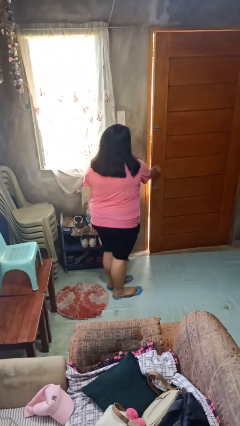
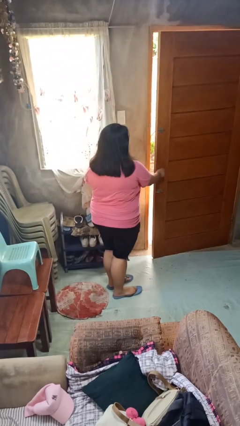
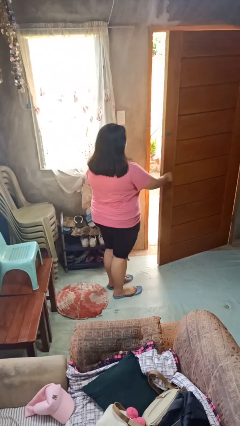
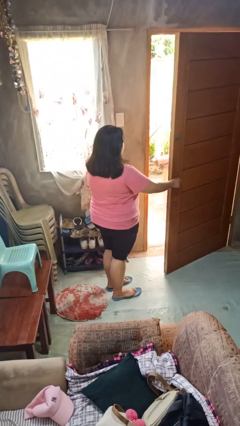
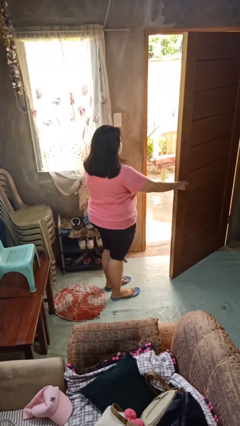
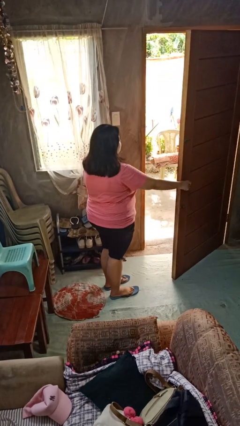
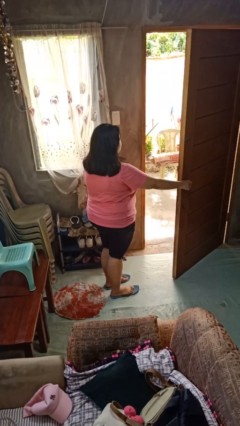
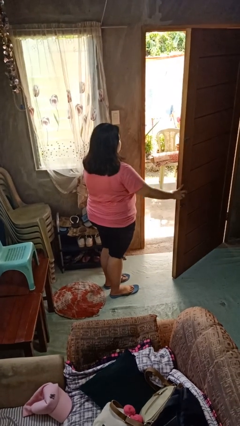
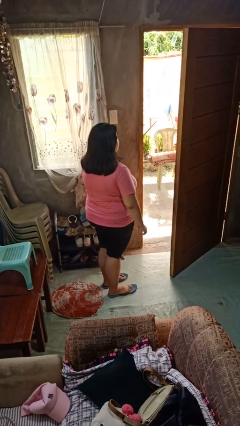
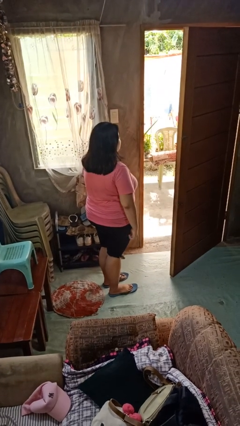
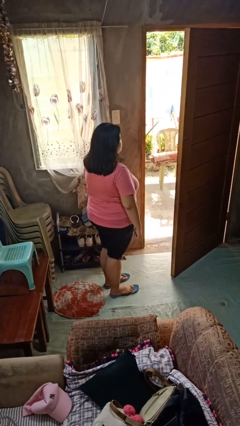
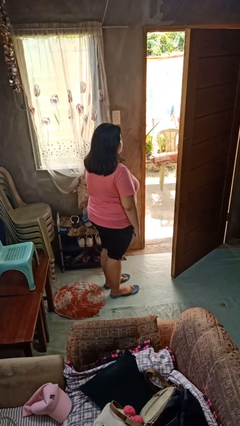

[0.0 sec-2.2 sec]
person opens facility door

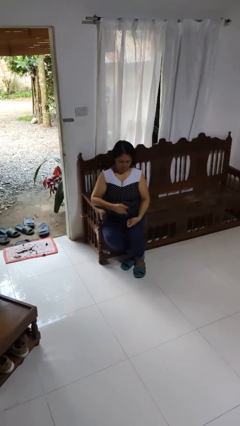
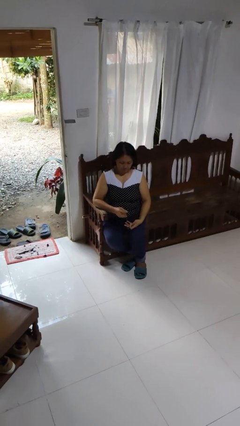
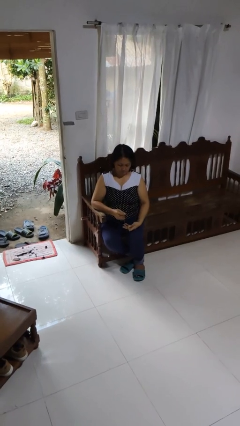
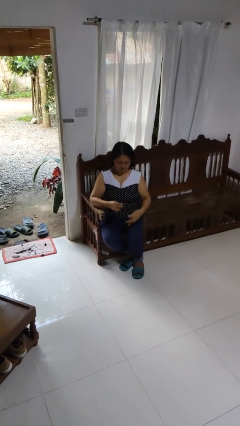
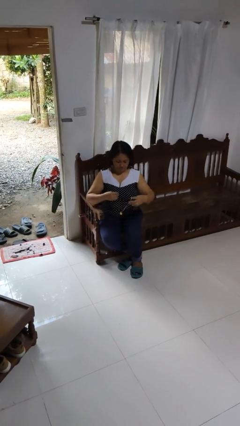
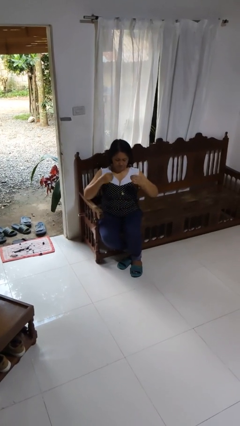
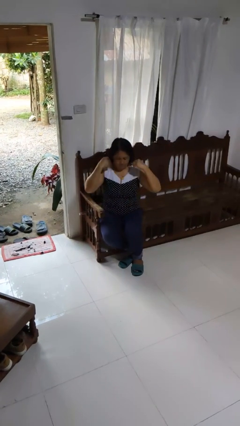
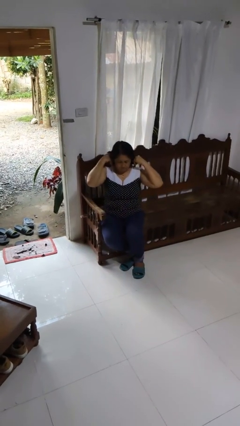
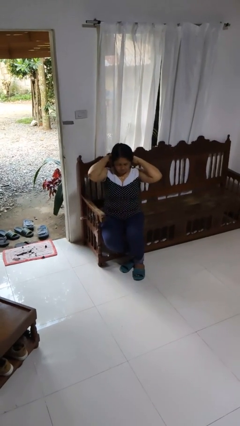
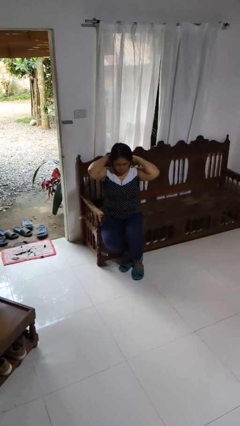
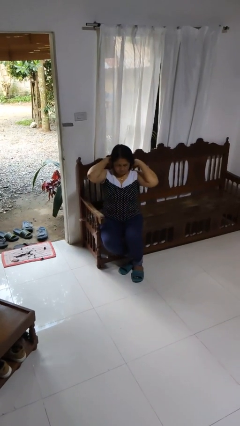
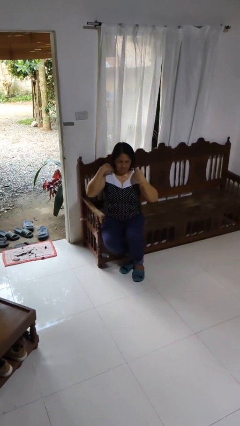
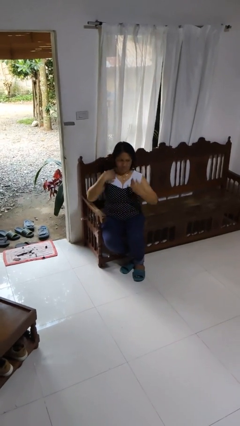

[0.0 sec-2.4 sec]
person puts on necklace

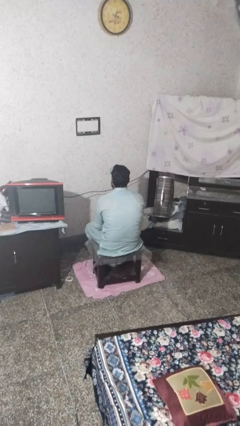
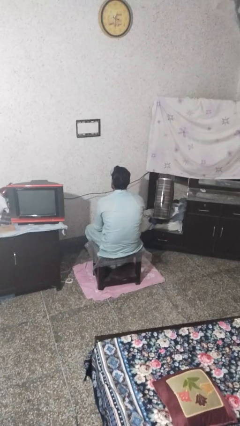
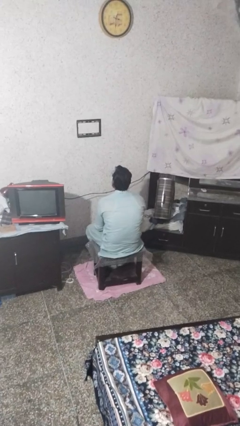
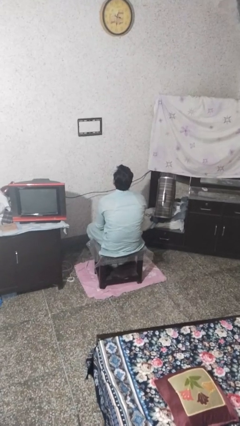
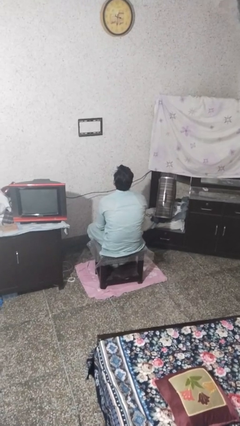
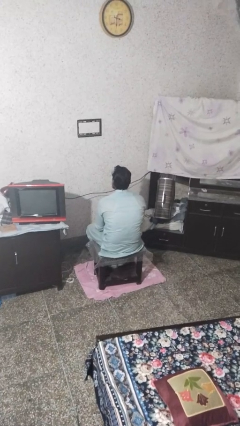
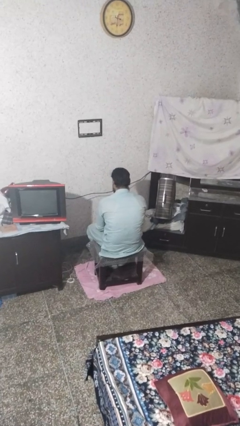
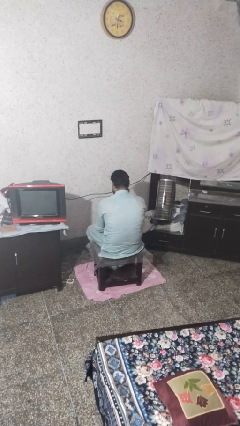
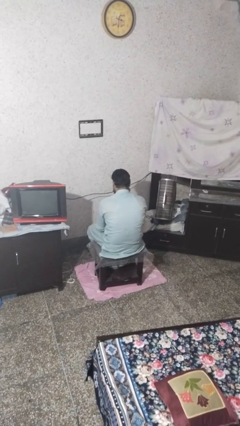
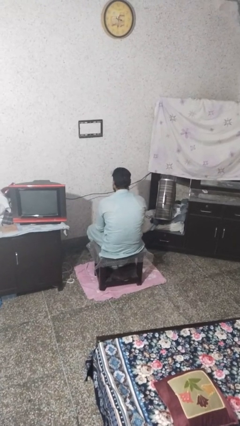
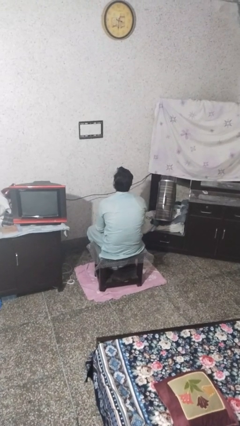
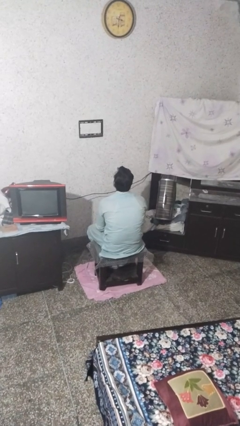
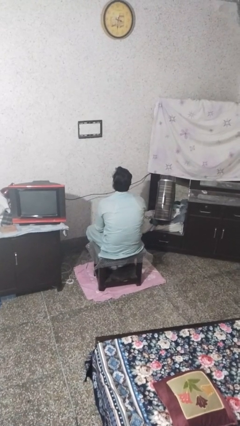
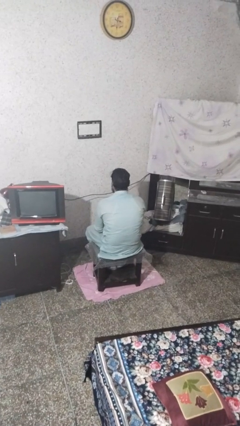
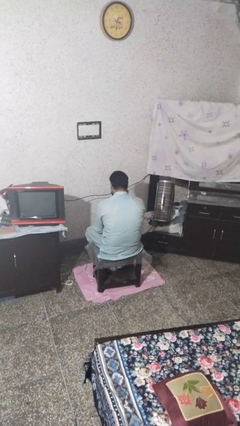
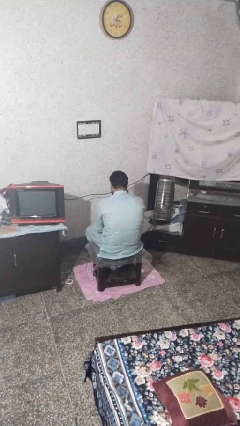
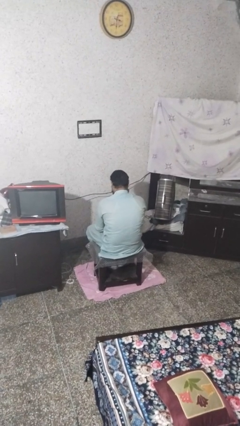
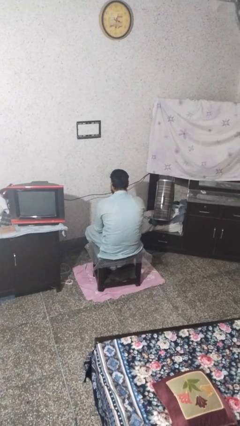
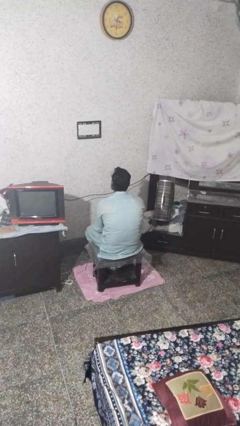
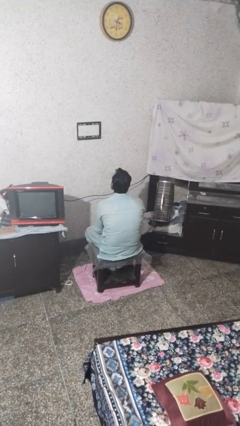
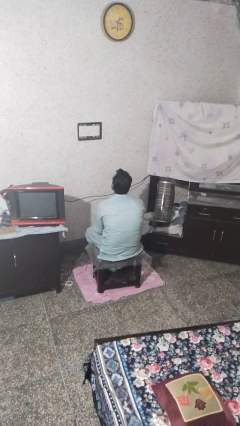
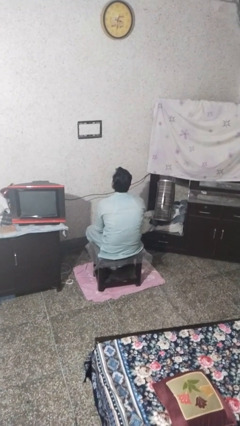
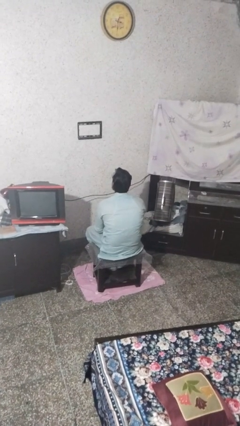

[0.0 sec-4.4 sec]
person nods head

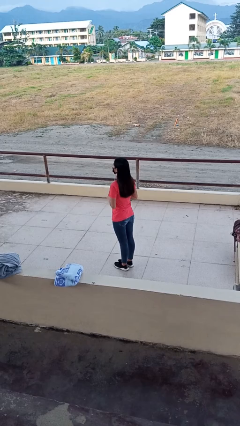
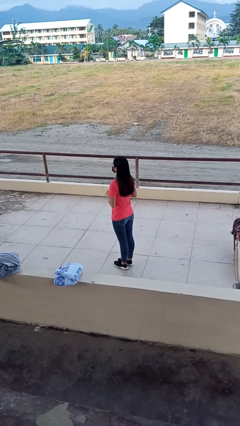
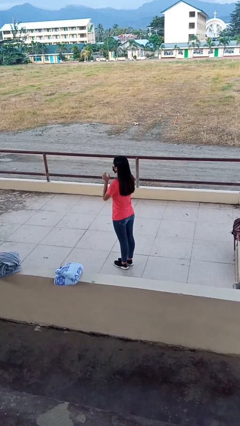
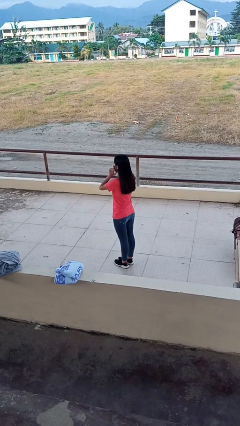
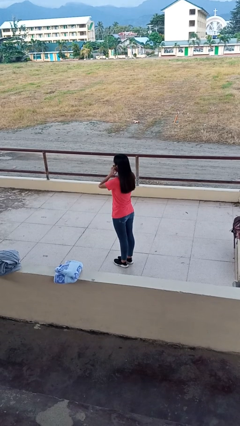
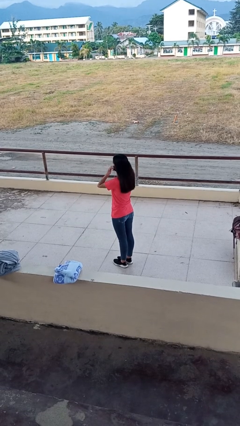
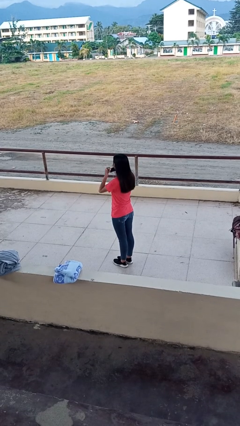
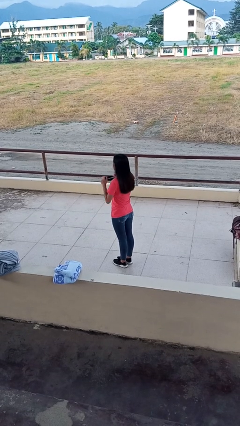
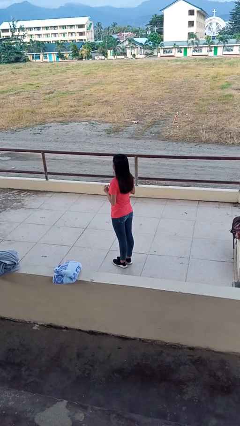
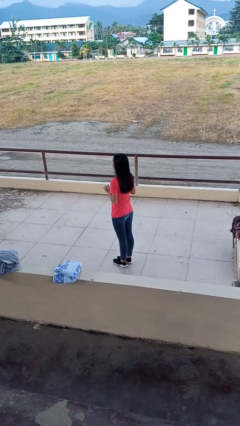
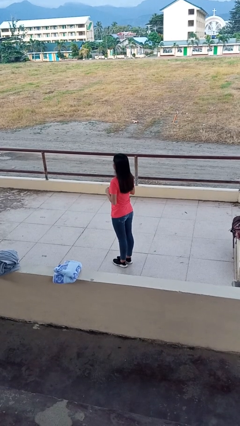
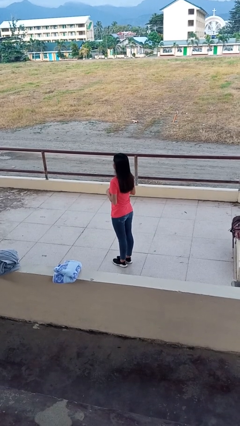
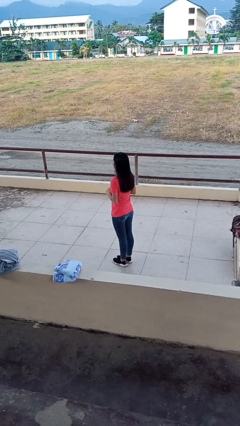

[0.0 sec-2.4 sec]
person takes off facemask

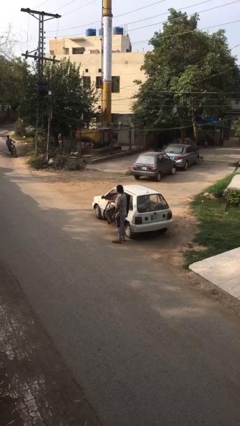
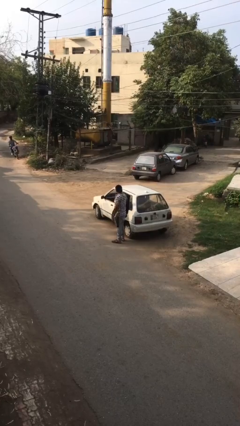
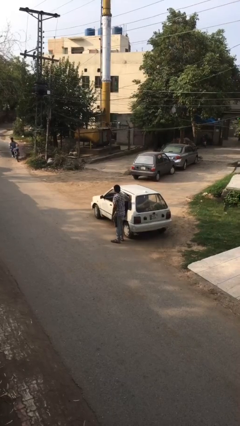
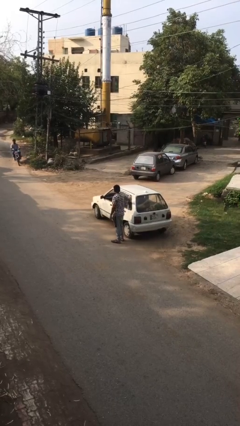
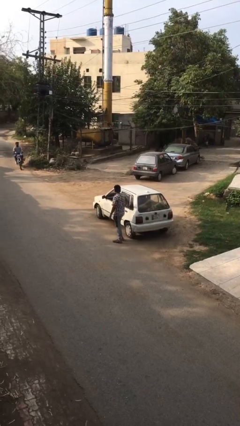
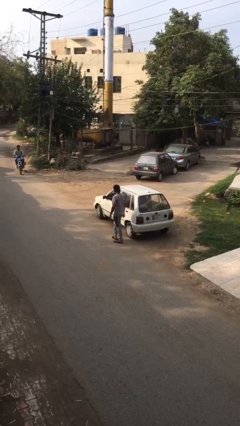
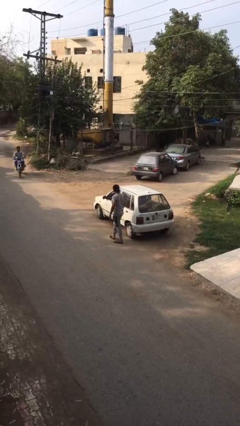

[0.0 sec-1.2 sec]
person closes car door

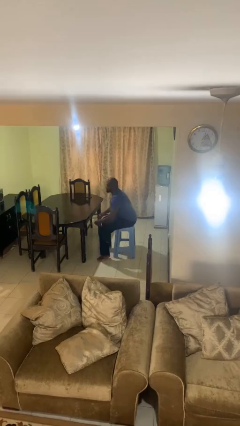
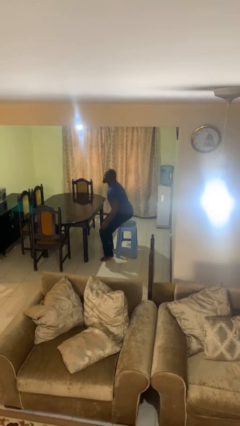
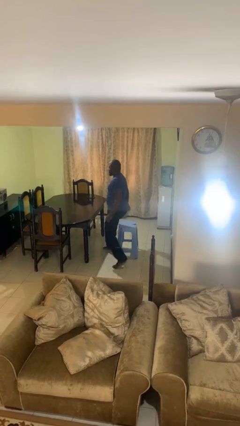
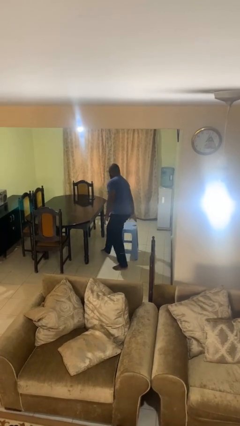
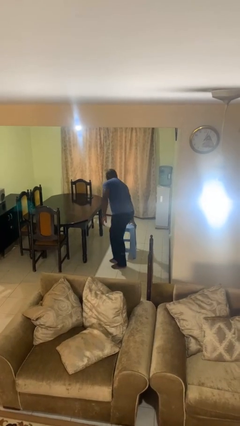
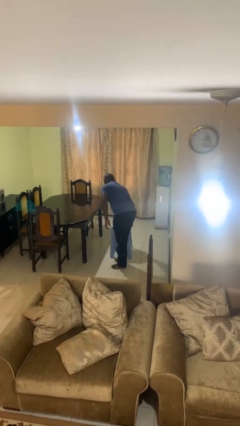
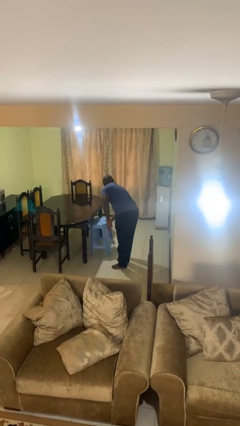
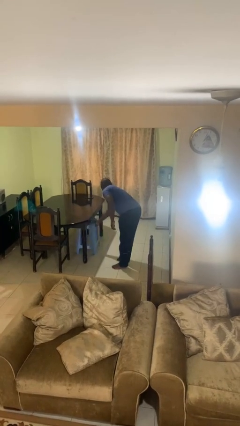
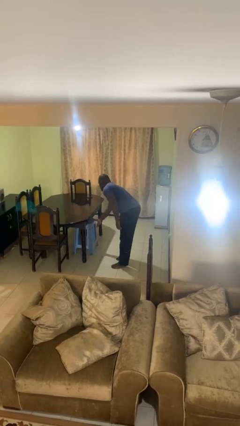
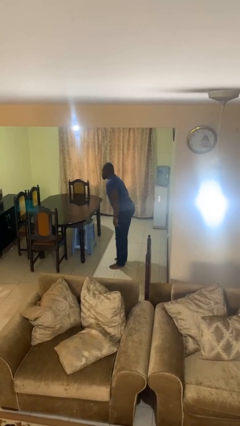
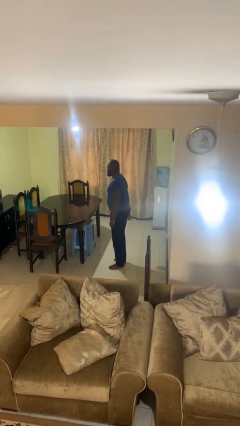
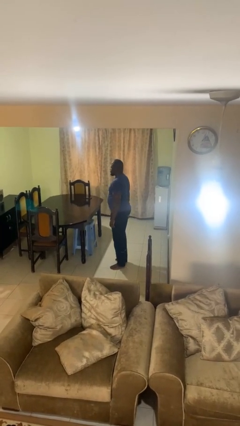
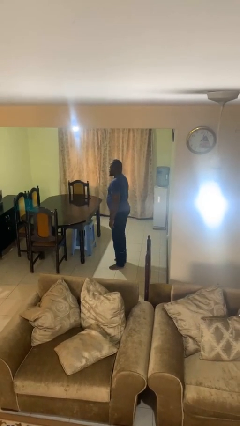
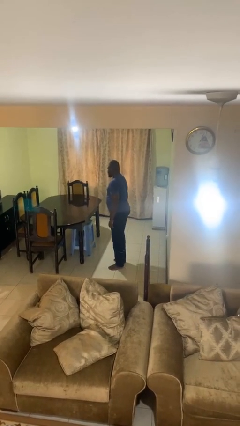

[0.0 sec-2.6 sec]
person stands up

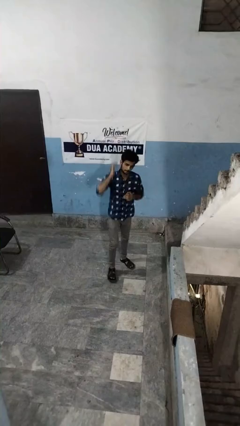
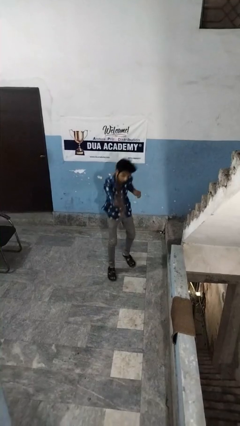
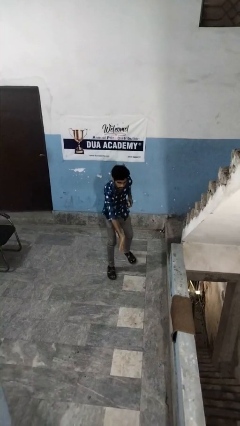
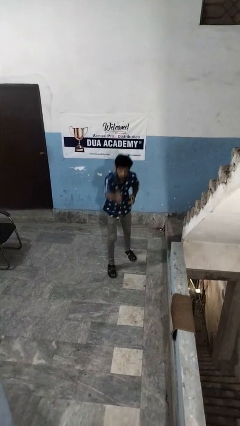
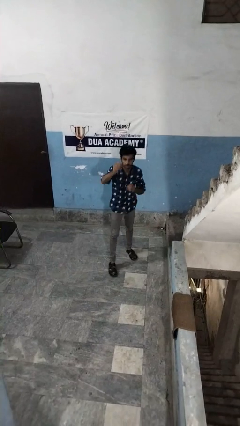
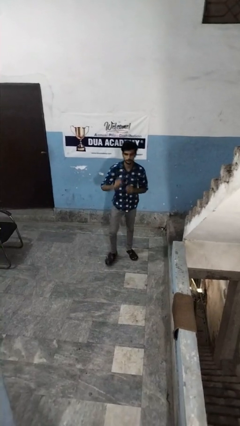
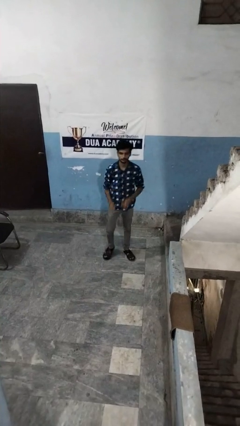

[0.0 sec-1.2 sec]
person karate chop

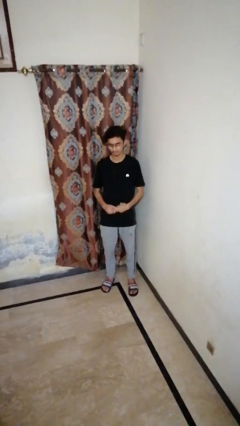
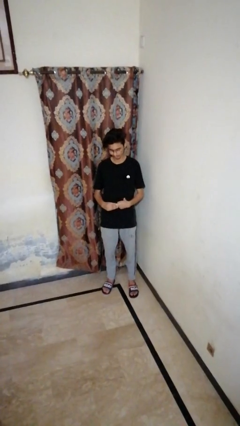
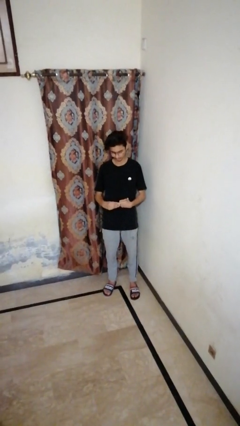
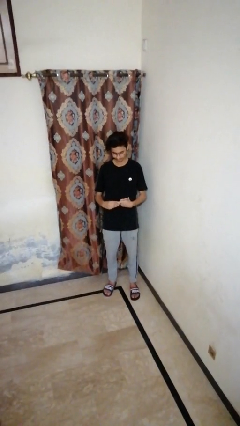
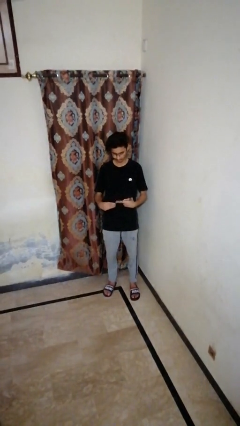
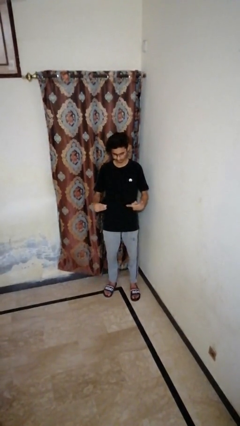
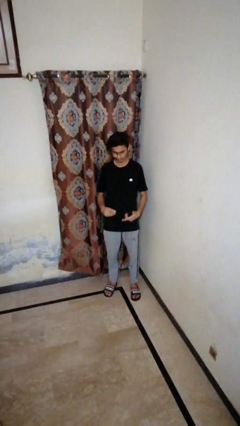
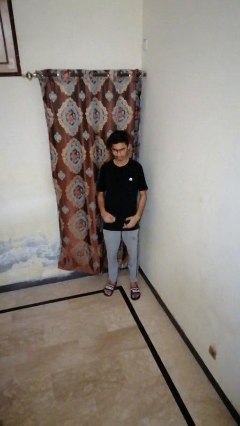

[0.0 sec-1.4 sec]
person takes off ring
